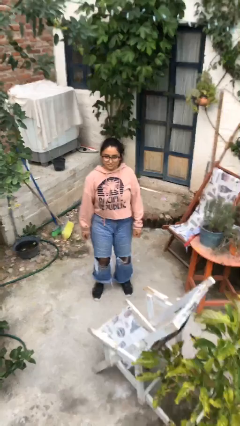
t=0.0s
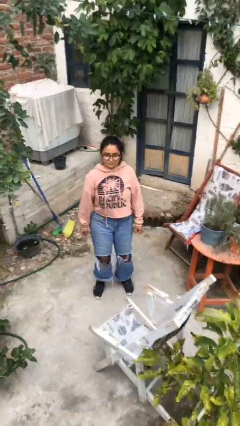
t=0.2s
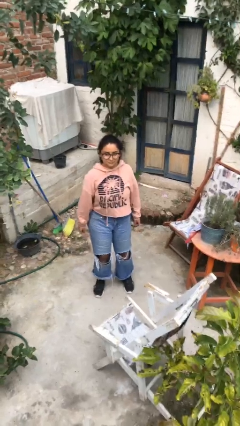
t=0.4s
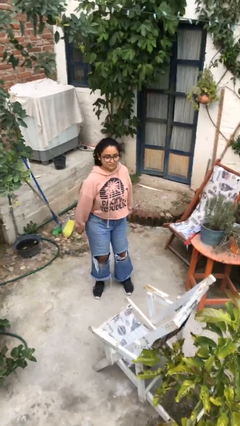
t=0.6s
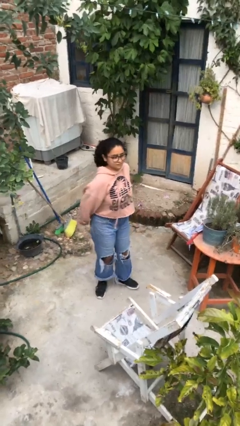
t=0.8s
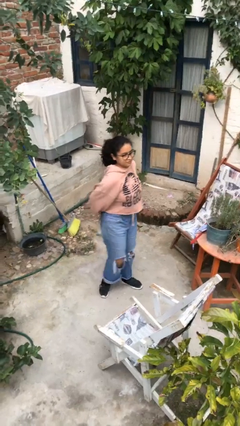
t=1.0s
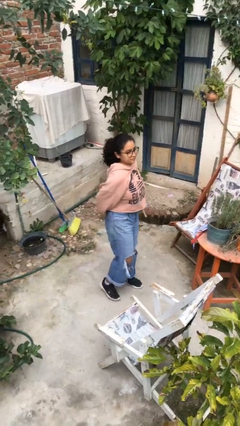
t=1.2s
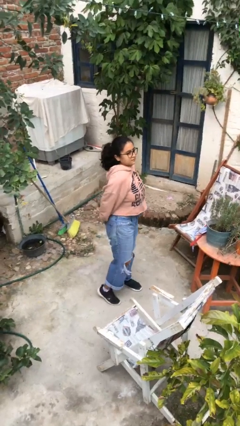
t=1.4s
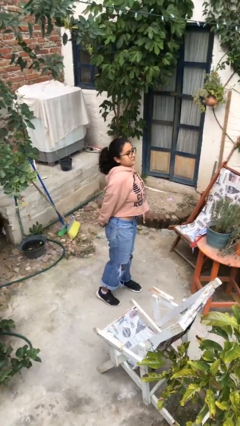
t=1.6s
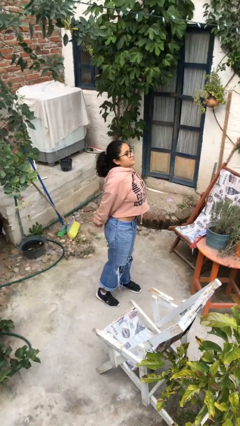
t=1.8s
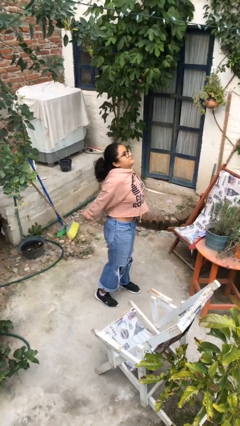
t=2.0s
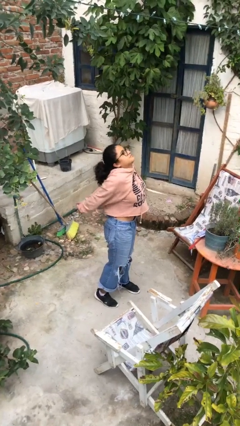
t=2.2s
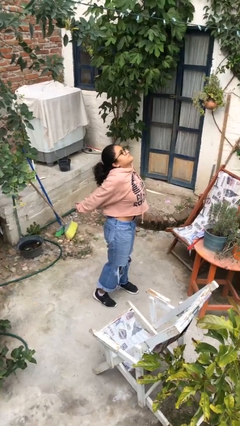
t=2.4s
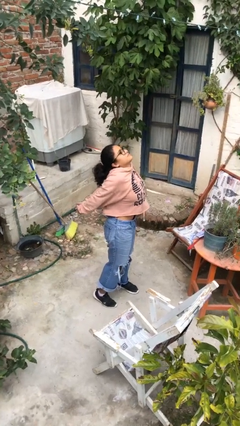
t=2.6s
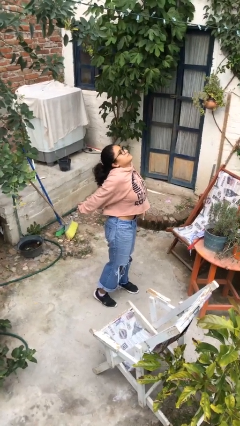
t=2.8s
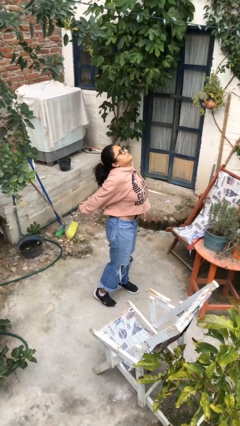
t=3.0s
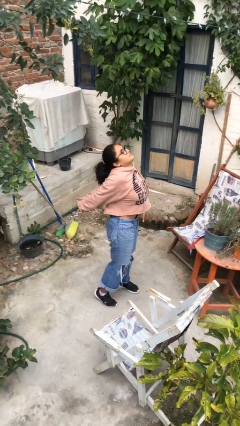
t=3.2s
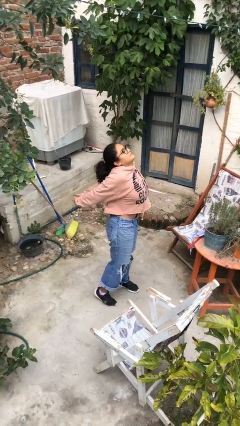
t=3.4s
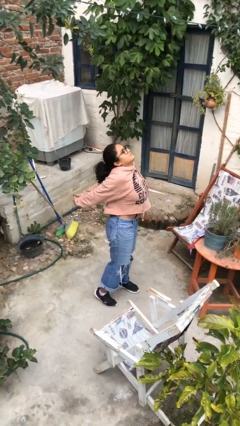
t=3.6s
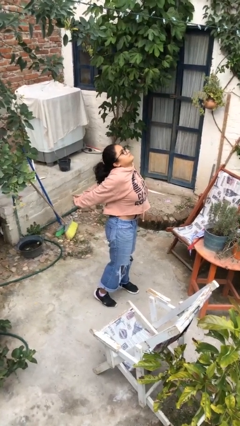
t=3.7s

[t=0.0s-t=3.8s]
person stretches back

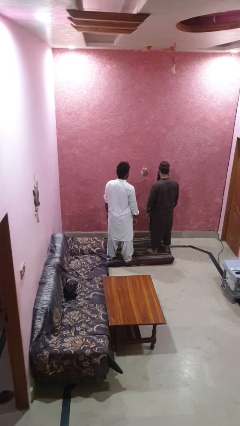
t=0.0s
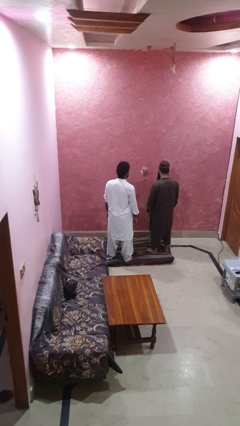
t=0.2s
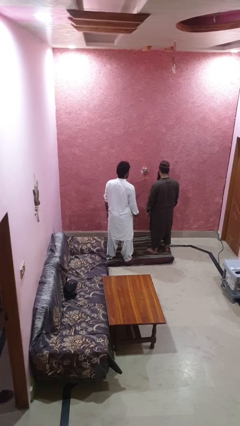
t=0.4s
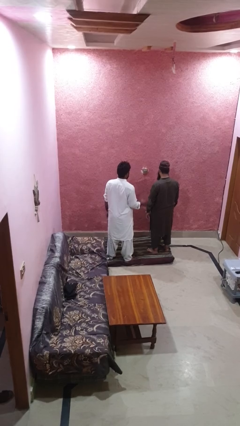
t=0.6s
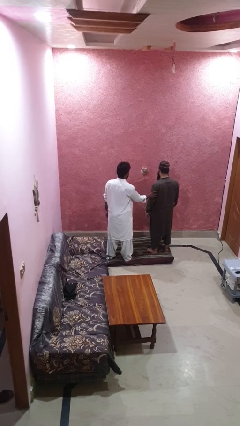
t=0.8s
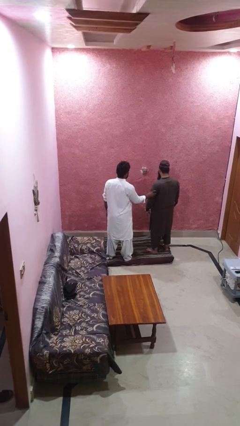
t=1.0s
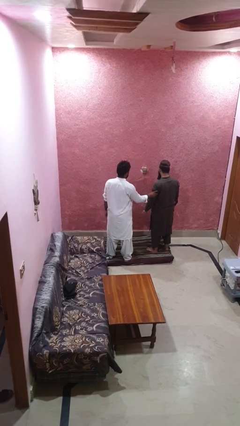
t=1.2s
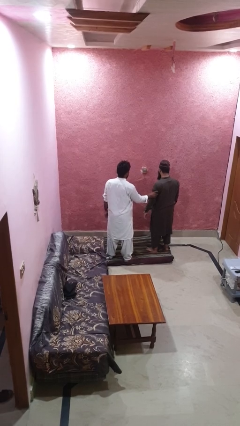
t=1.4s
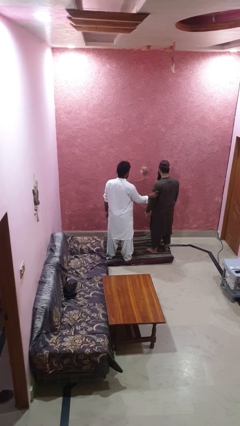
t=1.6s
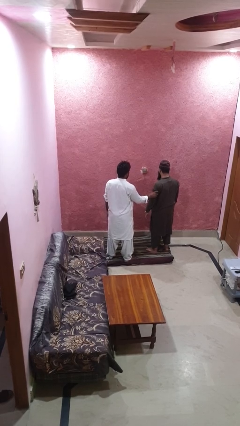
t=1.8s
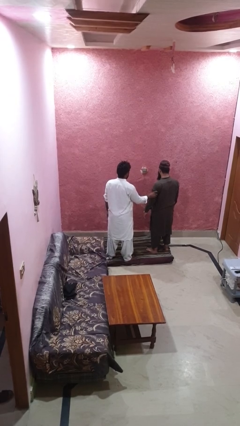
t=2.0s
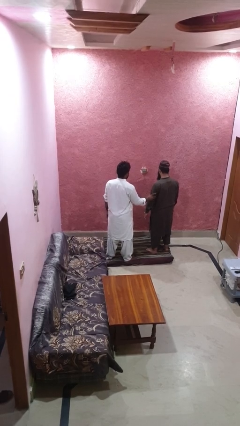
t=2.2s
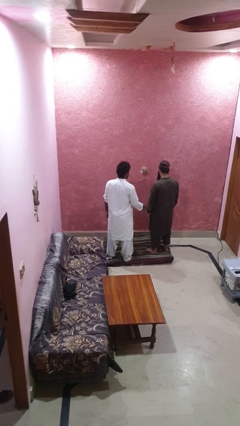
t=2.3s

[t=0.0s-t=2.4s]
person grabs person by bicep

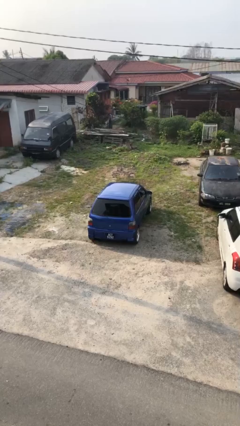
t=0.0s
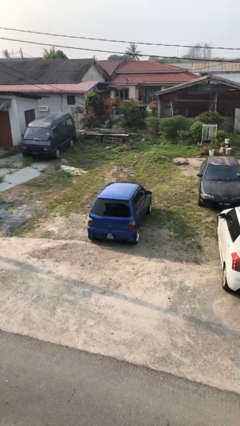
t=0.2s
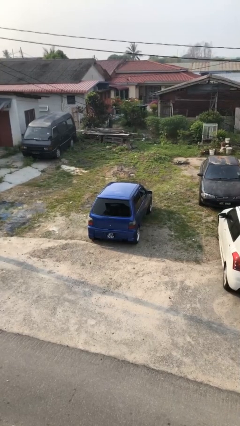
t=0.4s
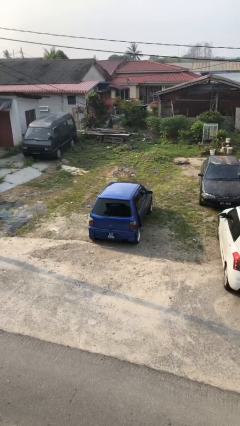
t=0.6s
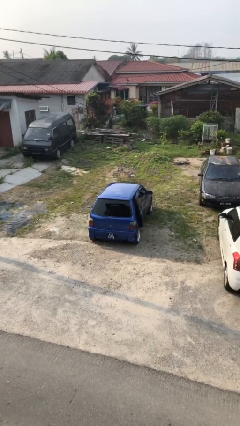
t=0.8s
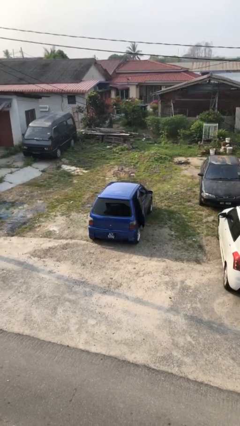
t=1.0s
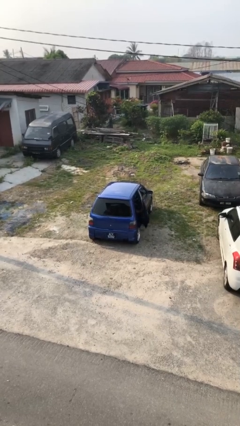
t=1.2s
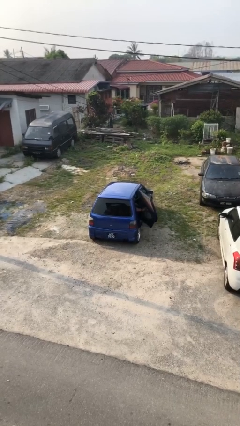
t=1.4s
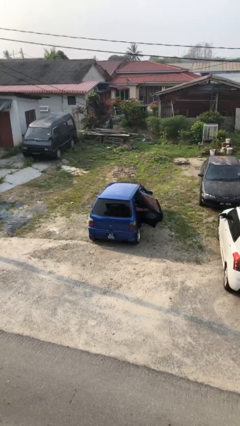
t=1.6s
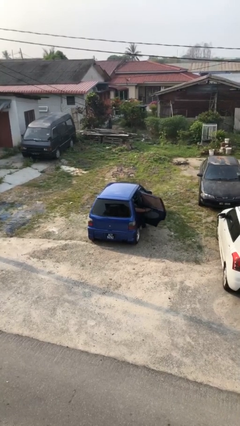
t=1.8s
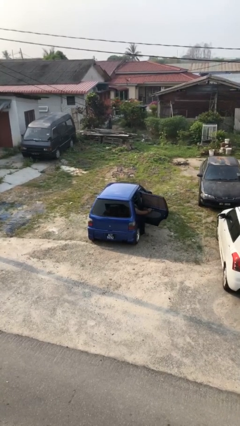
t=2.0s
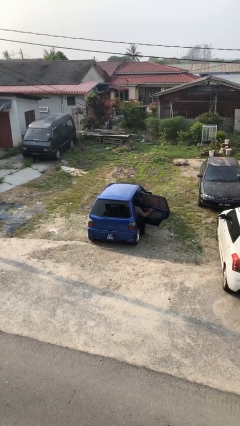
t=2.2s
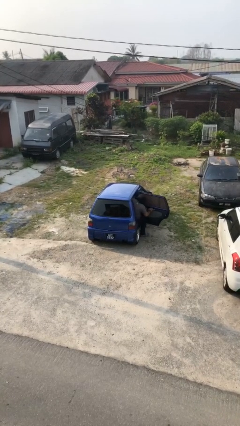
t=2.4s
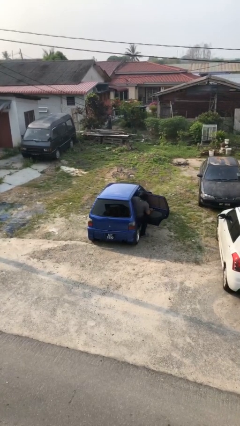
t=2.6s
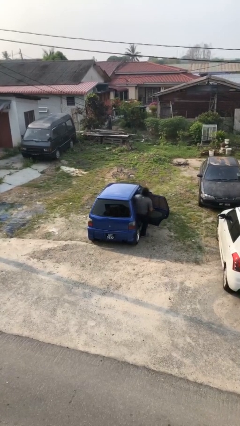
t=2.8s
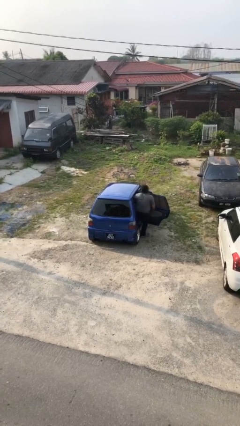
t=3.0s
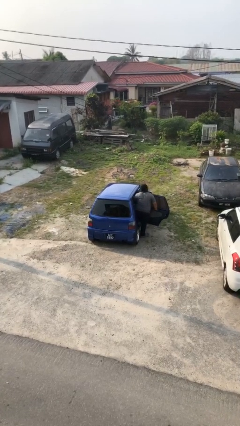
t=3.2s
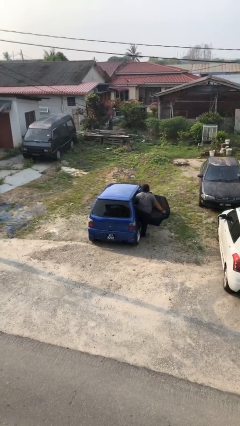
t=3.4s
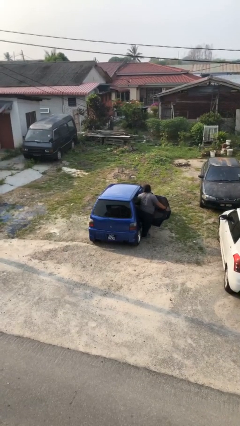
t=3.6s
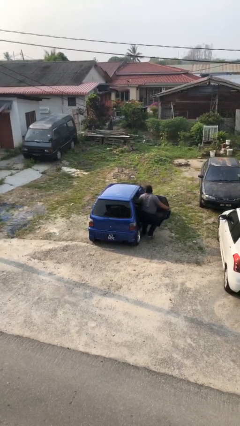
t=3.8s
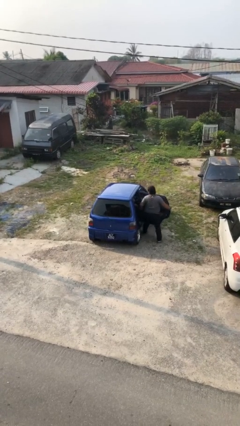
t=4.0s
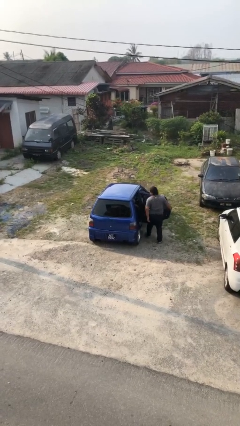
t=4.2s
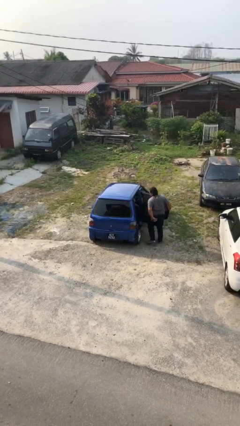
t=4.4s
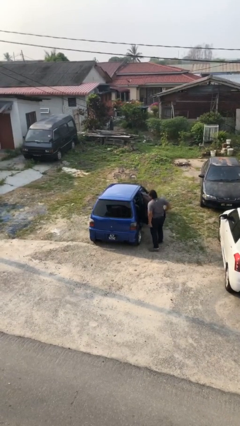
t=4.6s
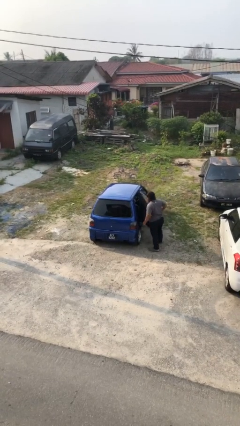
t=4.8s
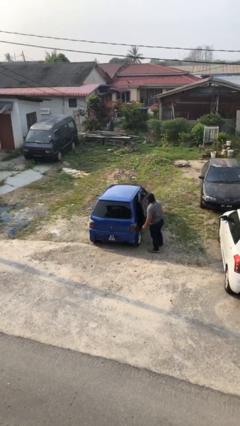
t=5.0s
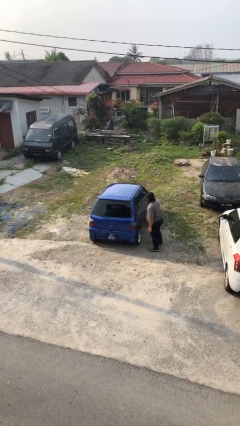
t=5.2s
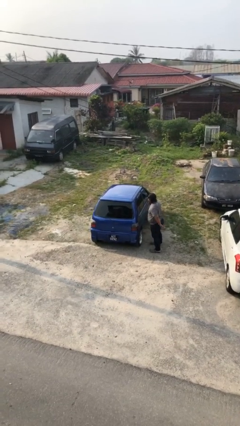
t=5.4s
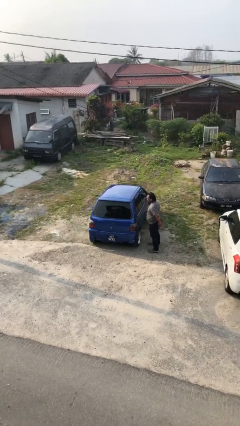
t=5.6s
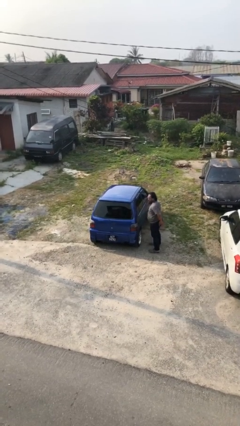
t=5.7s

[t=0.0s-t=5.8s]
car drops off person

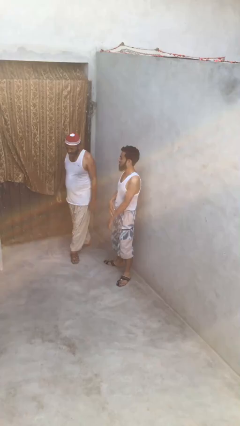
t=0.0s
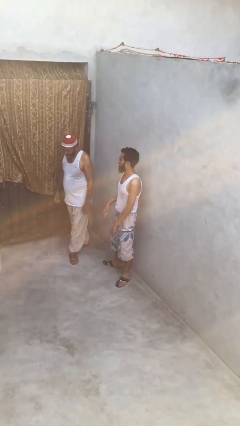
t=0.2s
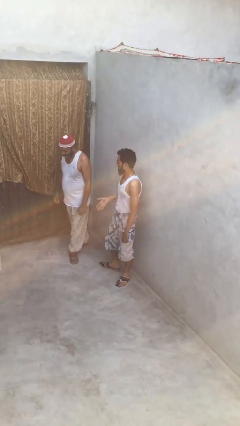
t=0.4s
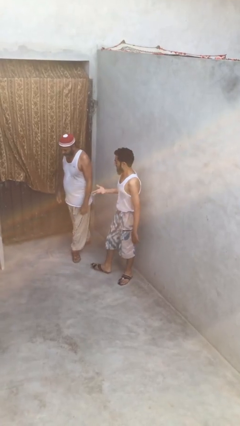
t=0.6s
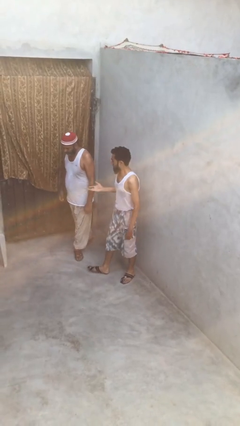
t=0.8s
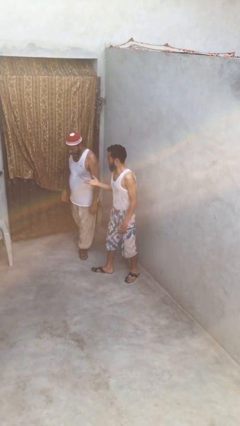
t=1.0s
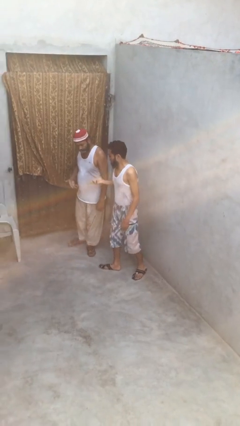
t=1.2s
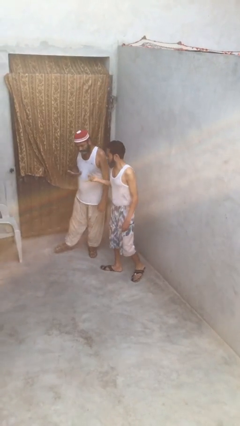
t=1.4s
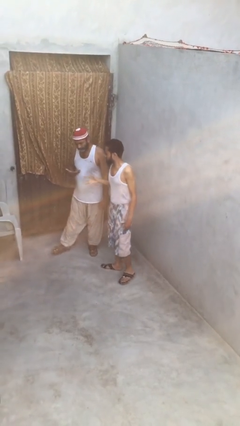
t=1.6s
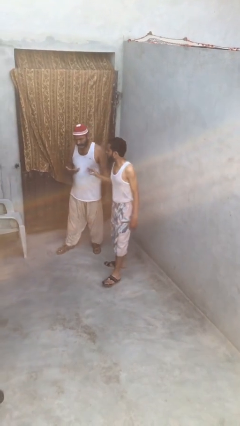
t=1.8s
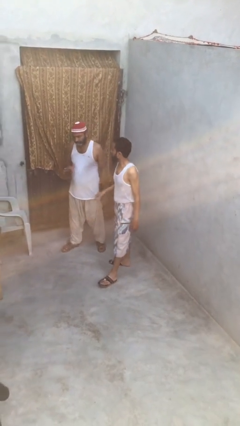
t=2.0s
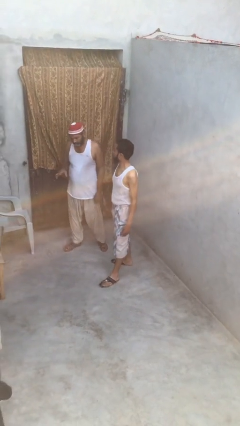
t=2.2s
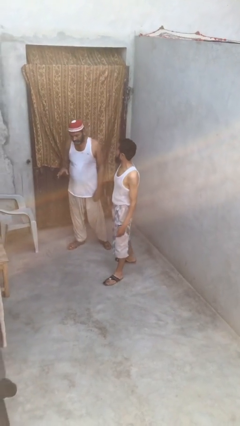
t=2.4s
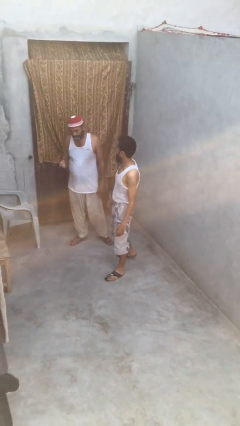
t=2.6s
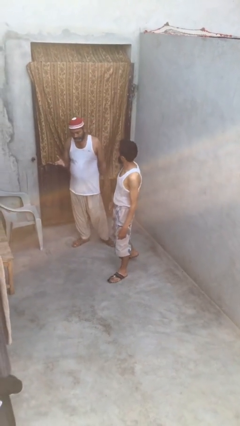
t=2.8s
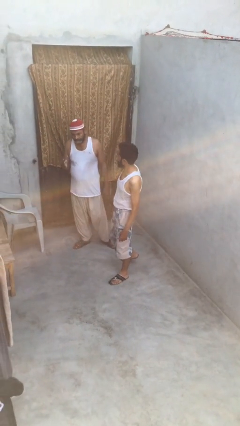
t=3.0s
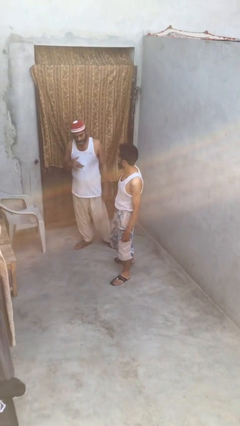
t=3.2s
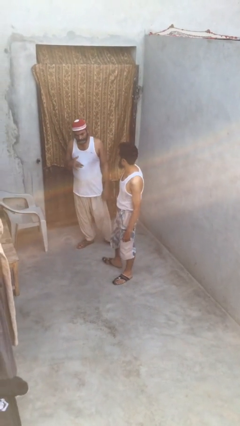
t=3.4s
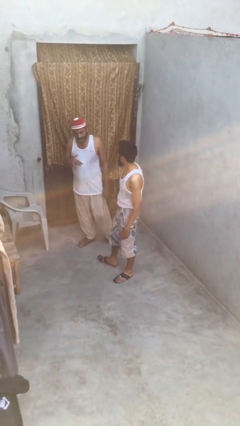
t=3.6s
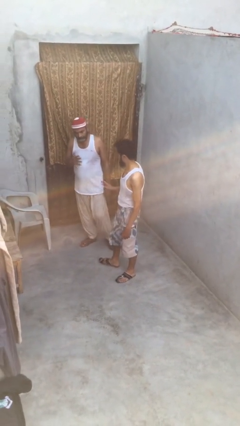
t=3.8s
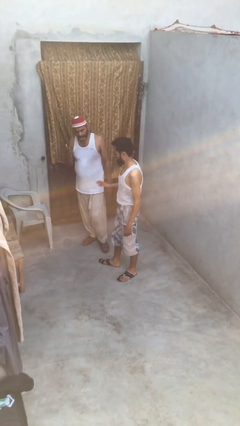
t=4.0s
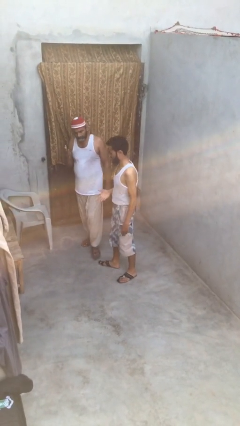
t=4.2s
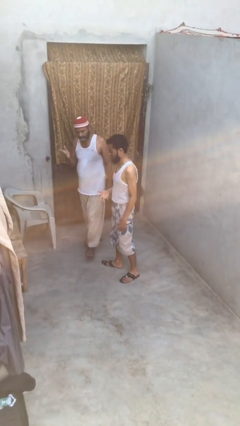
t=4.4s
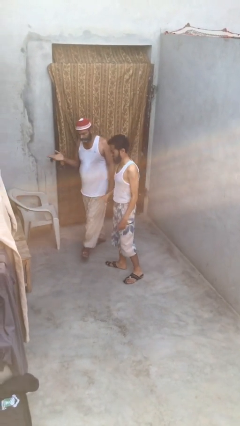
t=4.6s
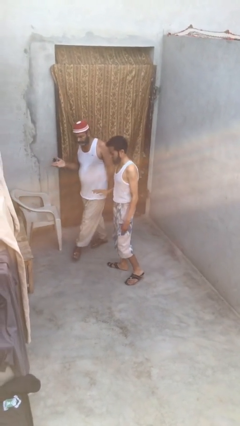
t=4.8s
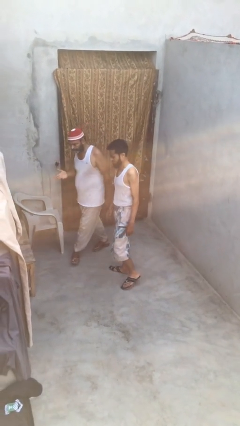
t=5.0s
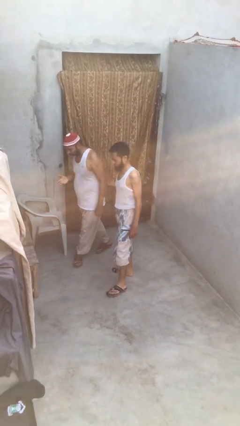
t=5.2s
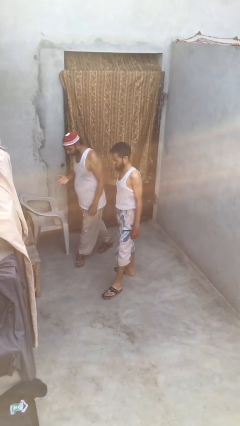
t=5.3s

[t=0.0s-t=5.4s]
person talks to person

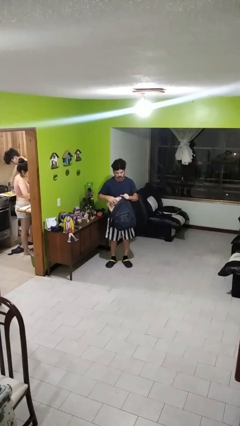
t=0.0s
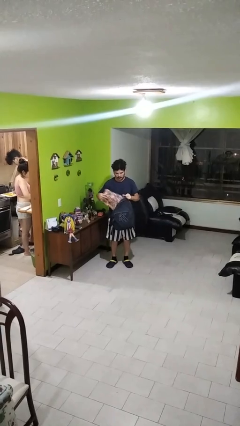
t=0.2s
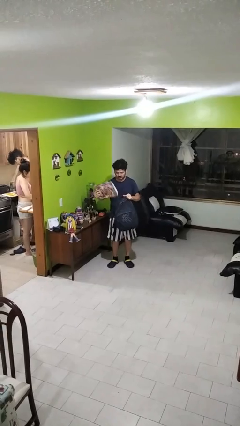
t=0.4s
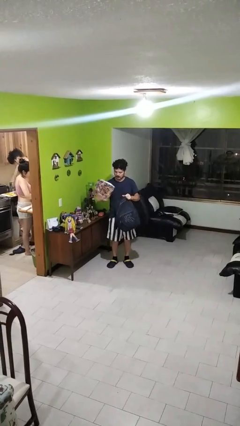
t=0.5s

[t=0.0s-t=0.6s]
person takes object from purse
